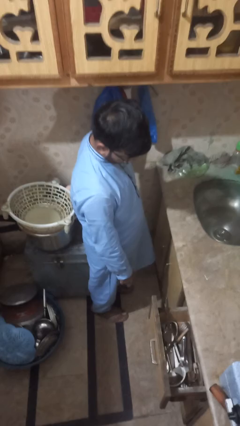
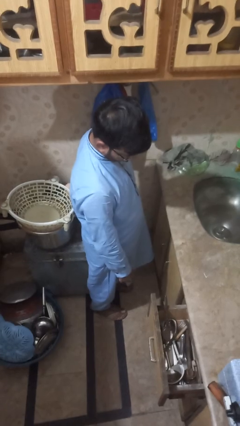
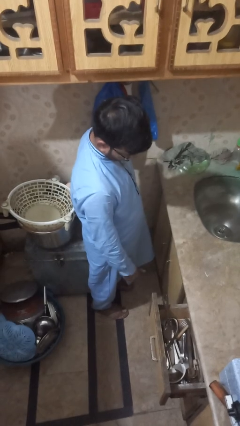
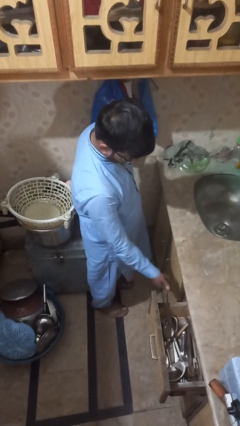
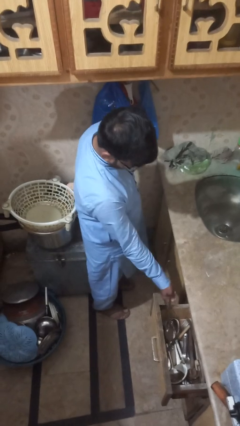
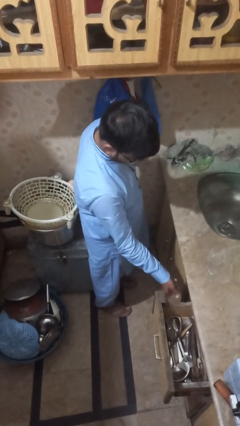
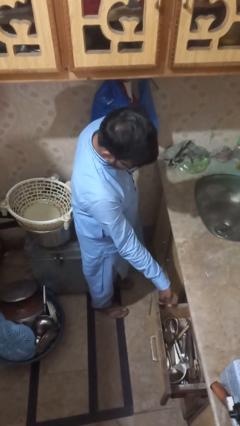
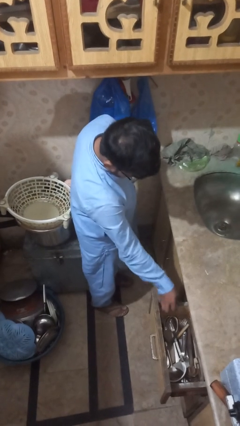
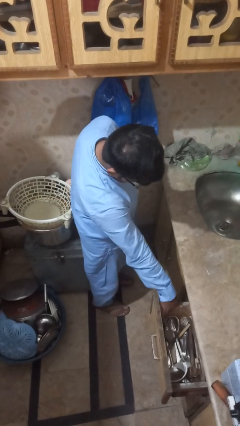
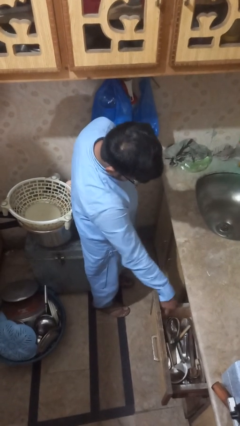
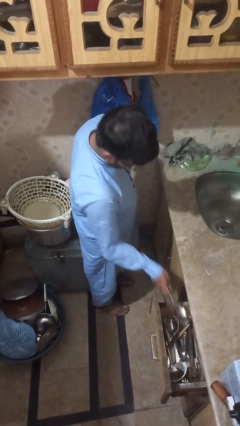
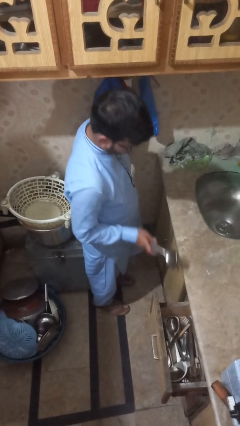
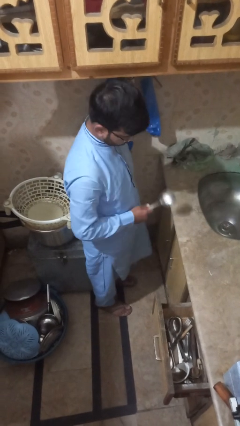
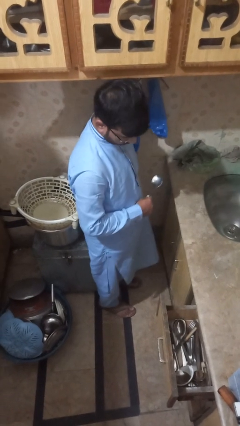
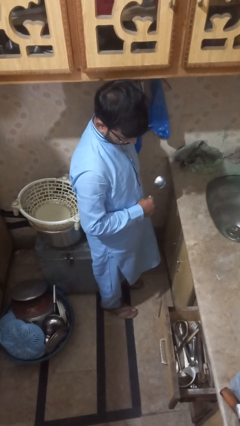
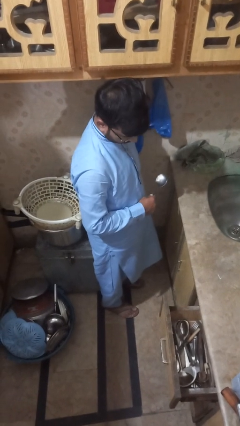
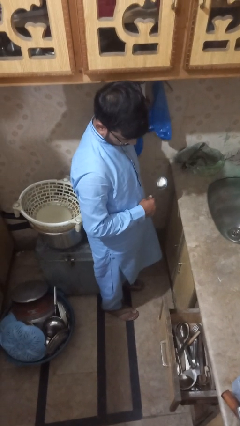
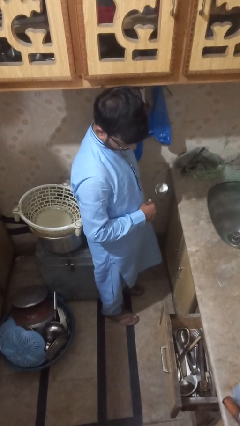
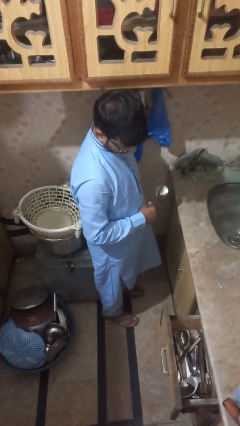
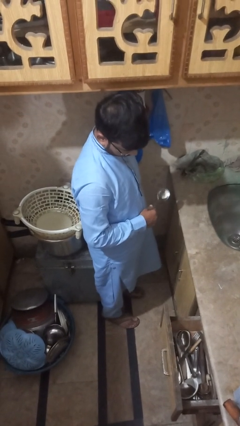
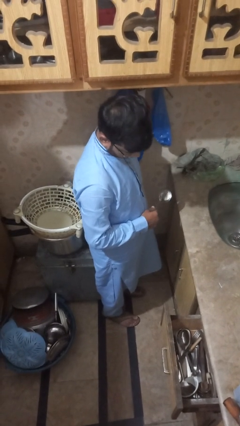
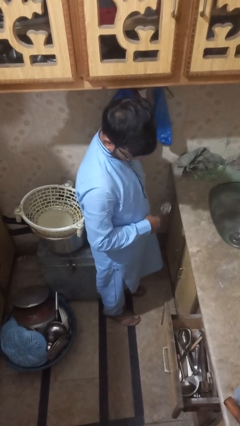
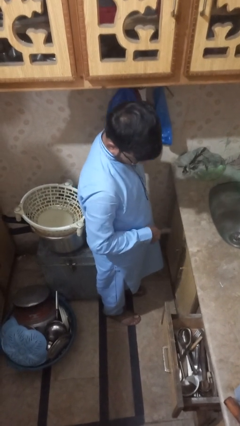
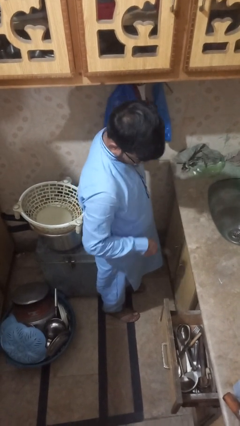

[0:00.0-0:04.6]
person takes object from kitchen drawer

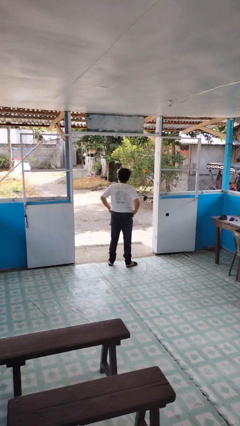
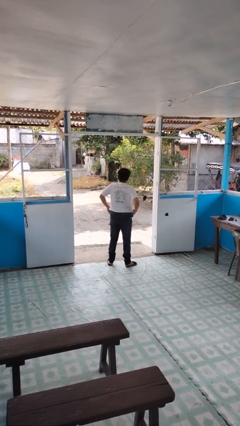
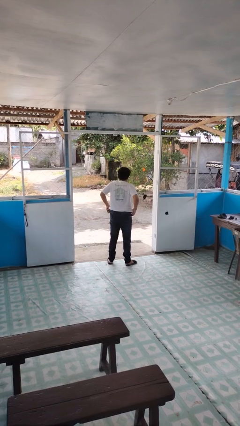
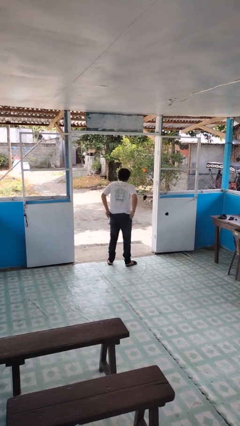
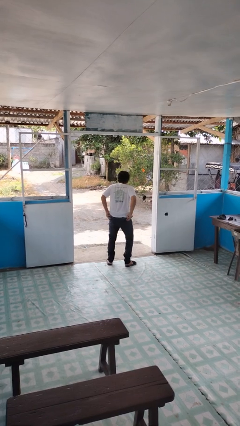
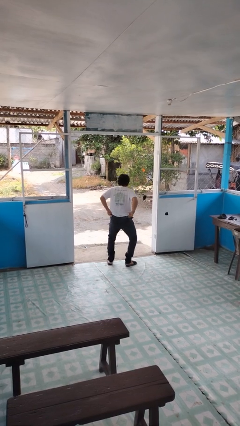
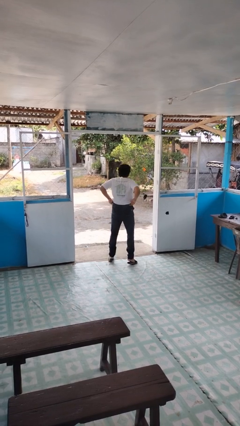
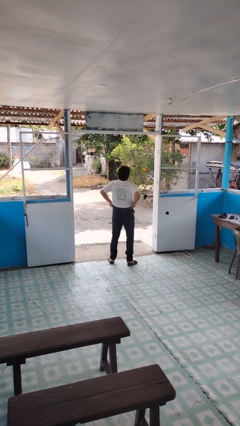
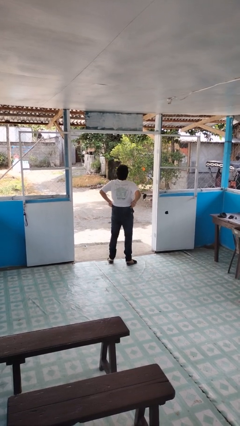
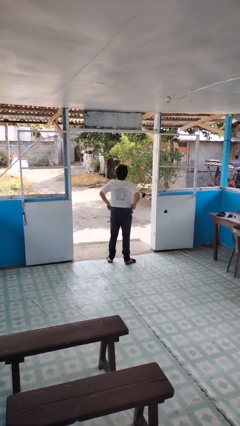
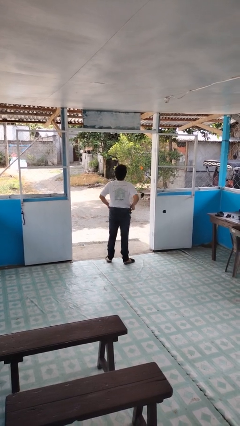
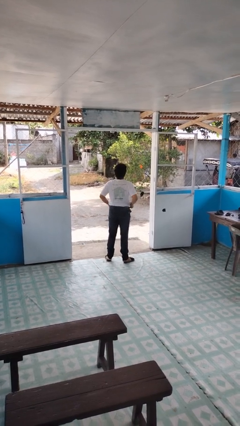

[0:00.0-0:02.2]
person hikes up pants

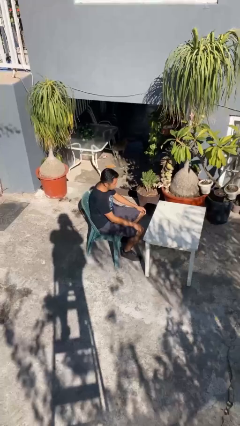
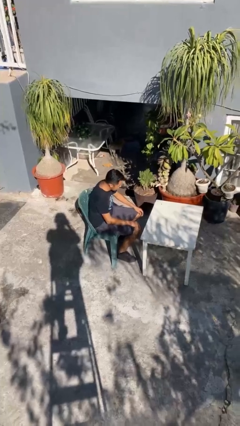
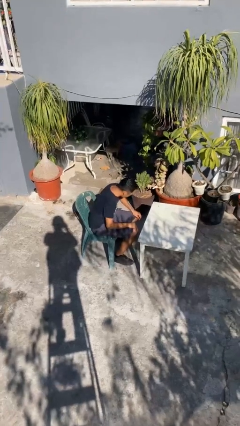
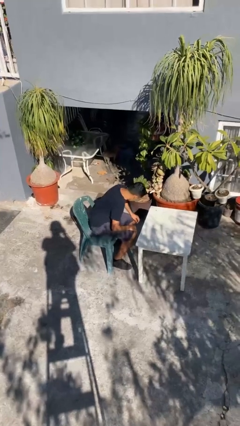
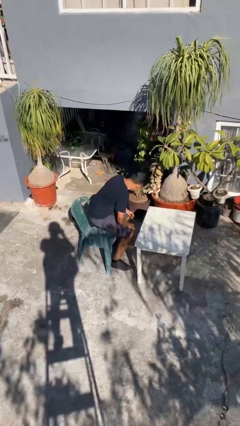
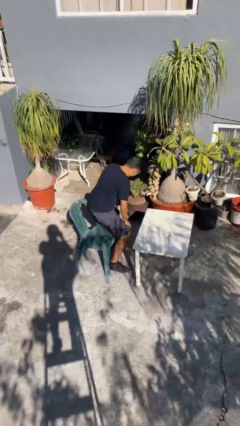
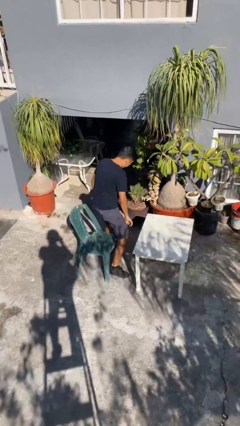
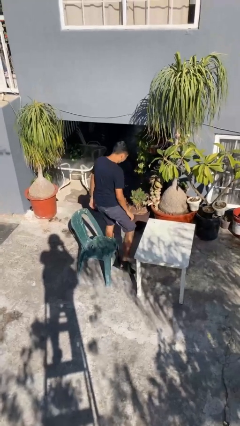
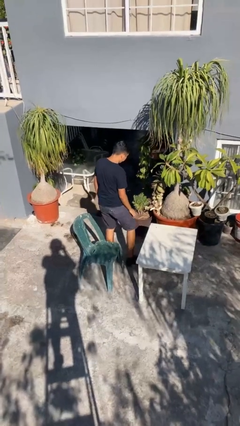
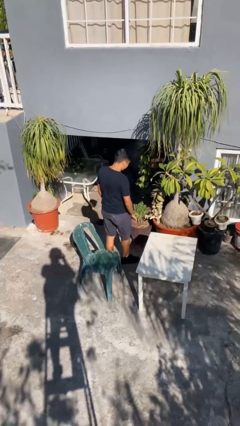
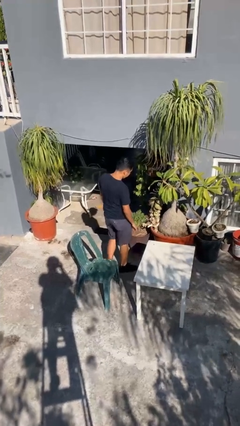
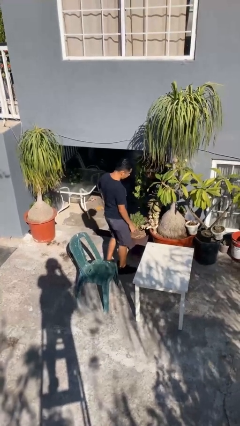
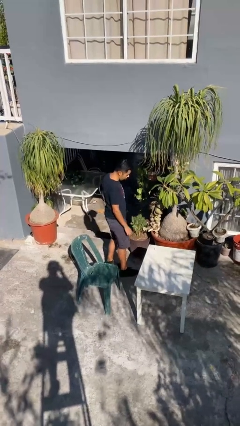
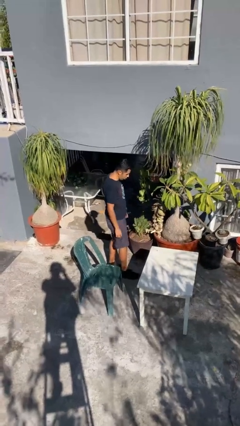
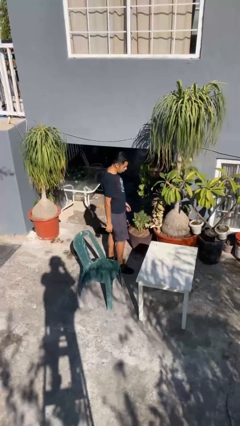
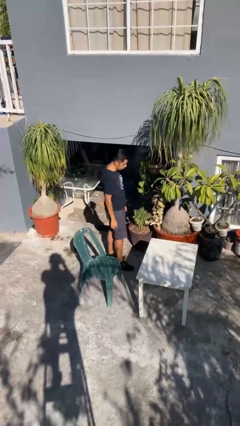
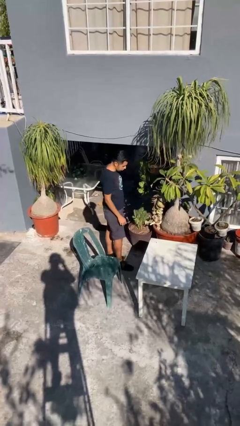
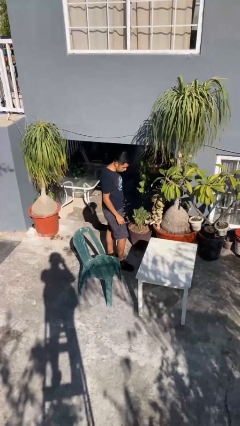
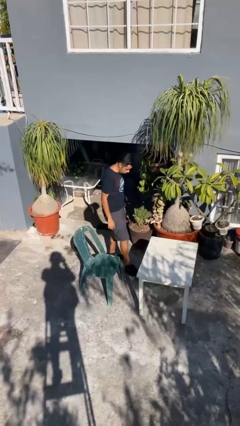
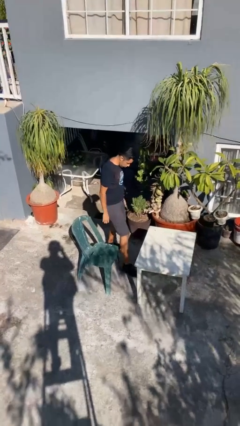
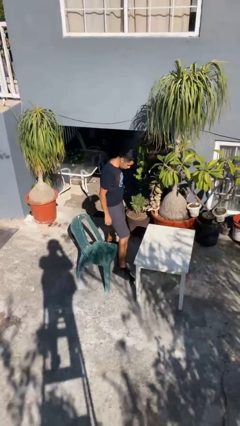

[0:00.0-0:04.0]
person stands up

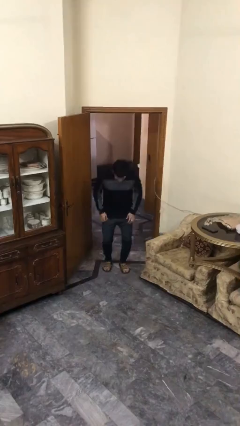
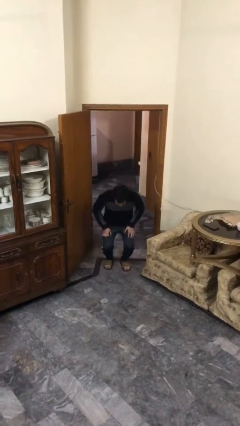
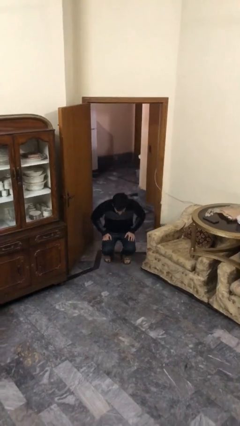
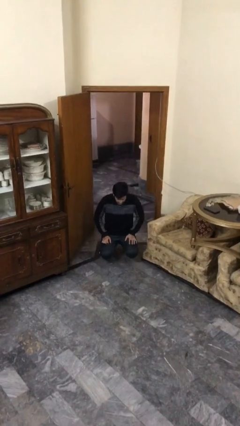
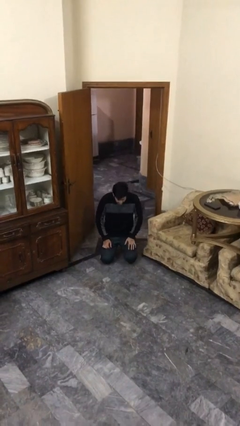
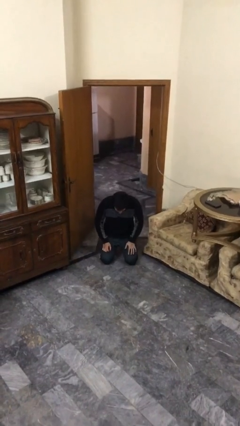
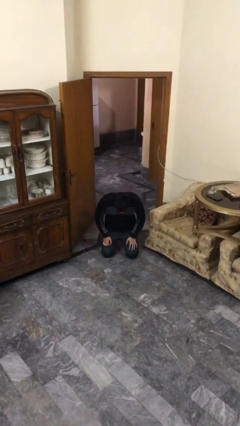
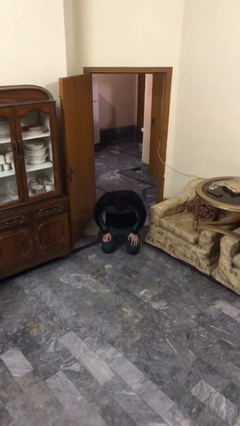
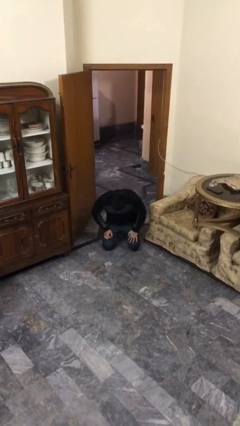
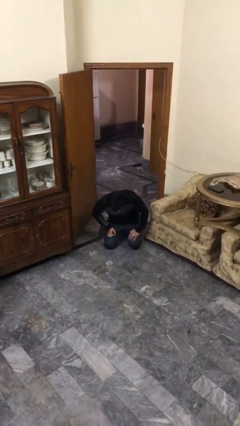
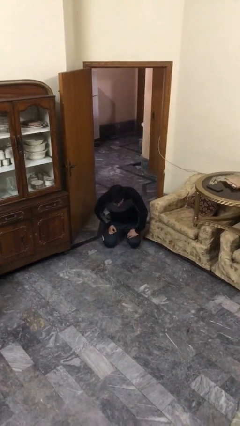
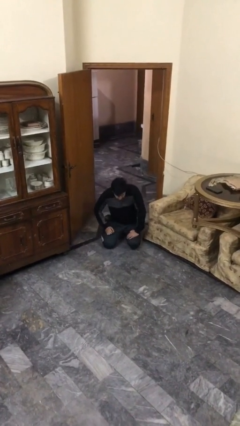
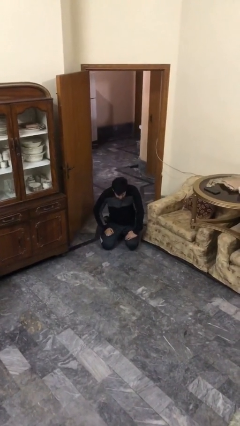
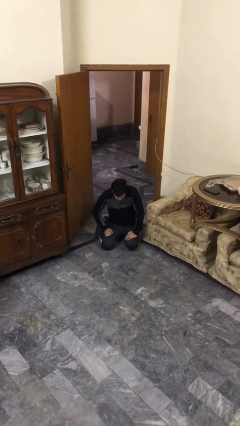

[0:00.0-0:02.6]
person sits down

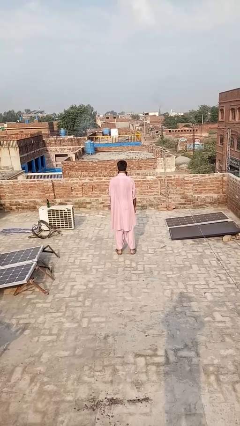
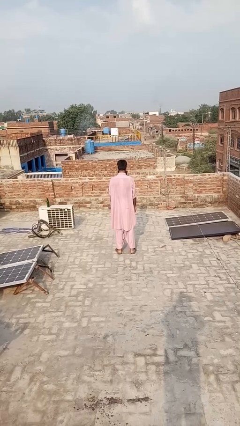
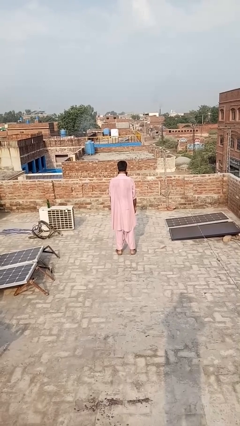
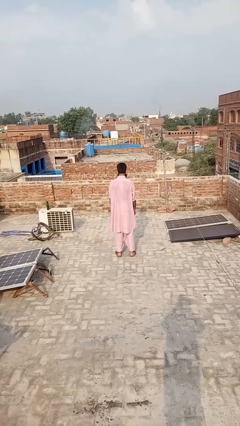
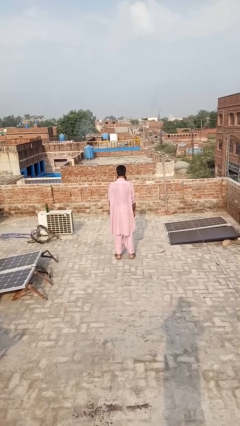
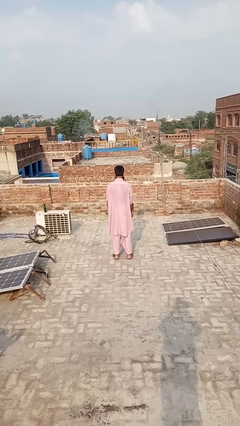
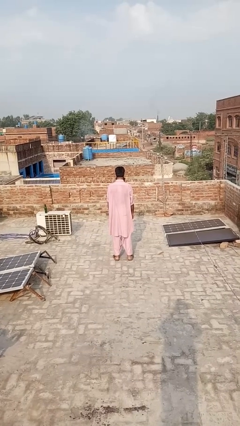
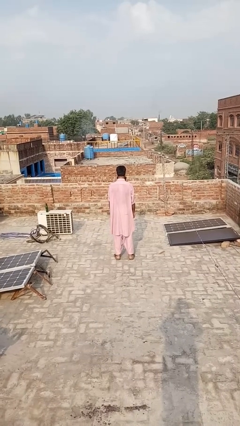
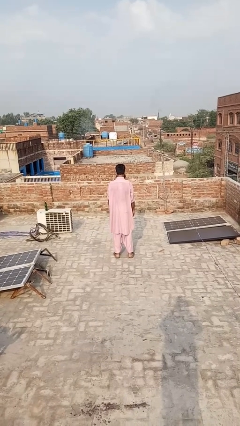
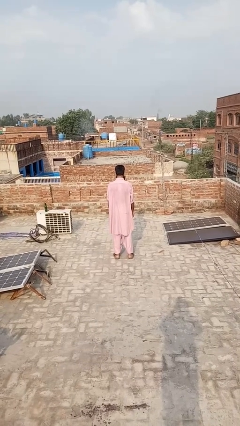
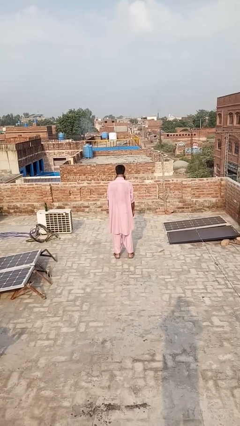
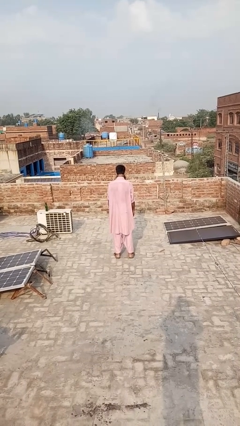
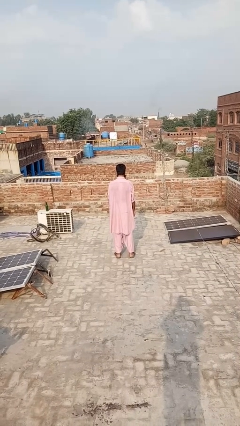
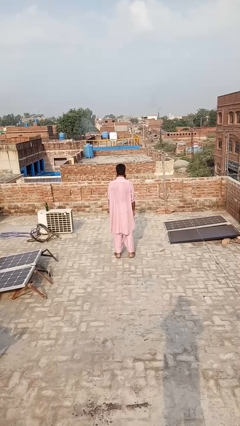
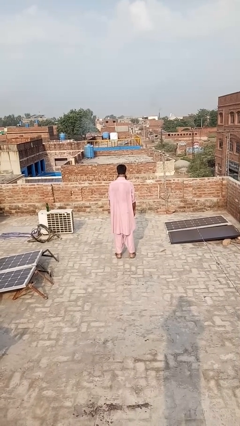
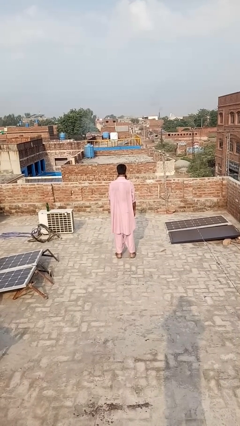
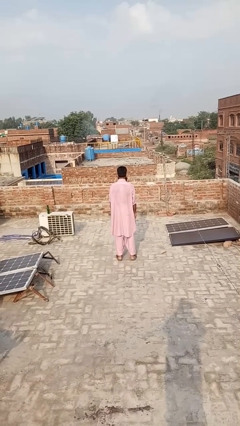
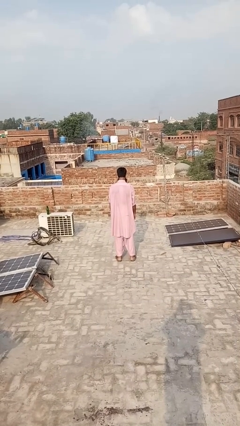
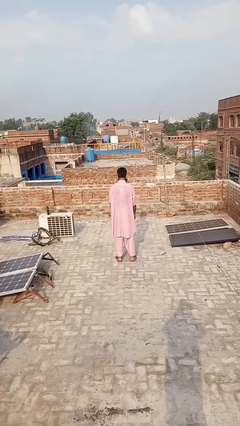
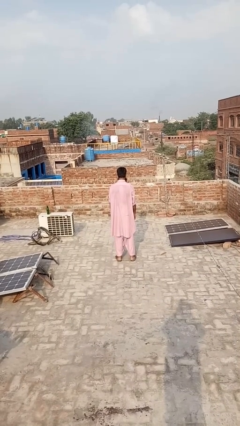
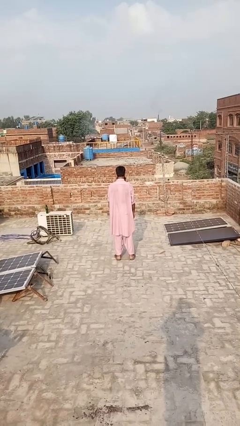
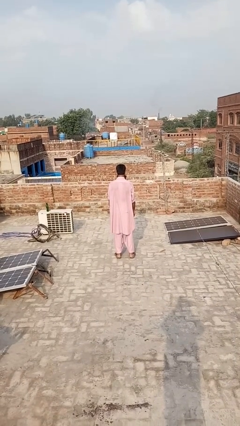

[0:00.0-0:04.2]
person nods head
